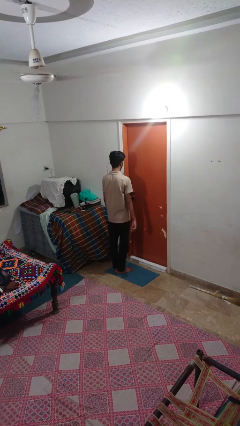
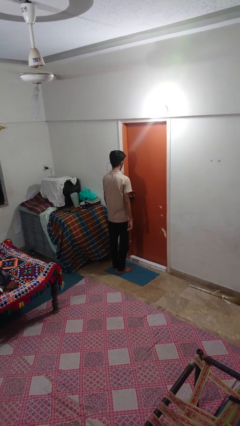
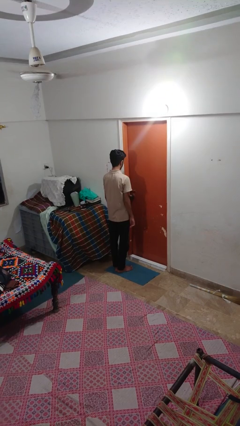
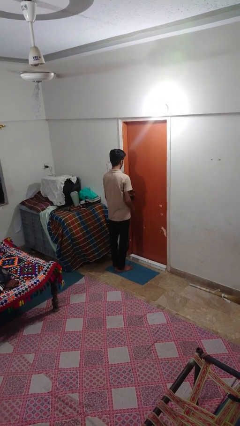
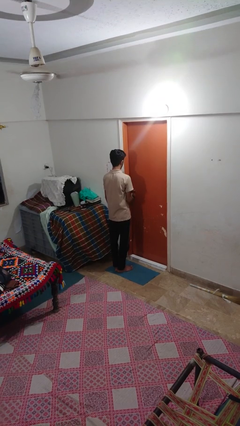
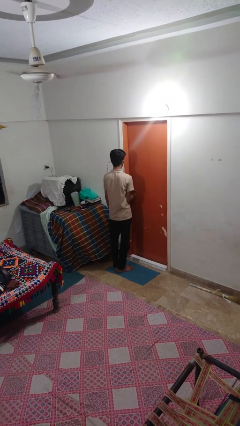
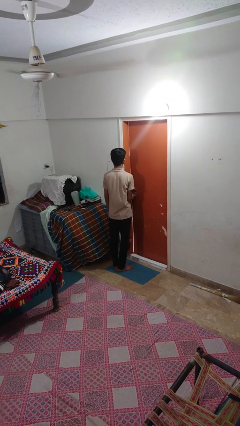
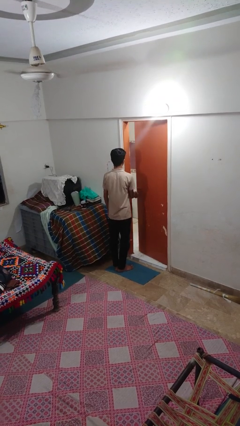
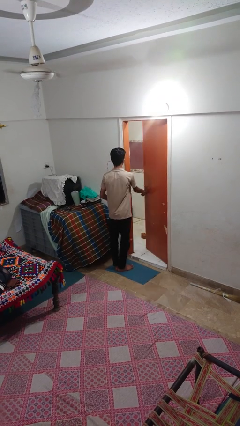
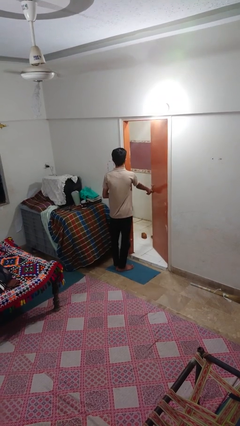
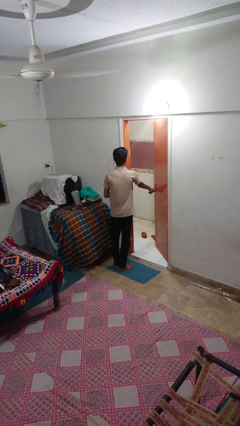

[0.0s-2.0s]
person opens facility door

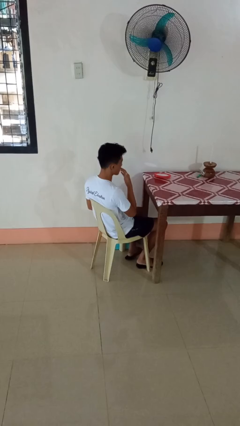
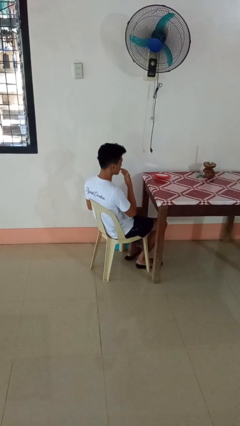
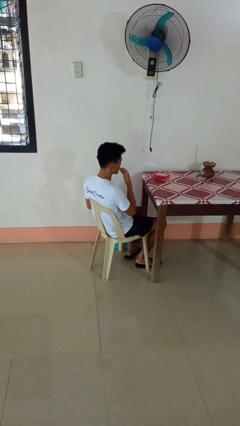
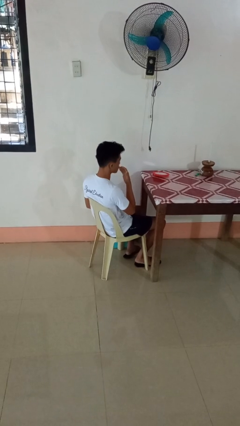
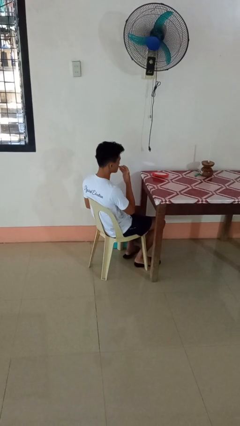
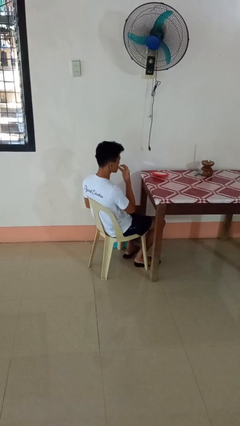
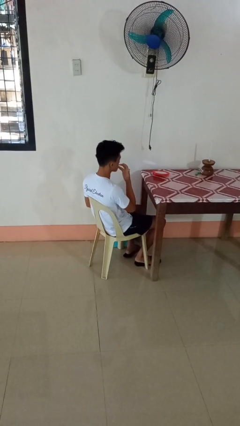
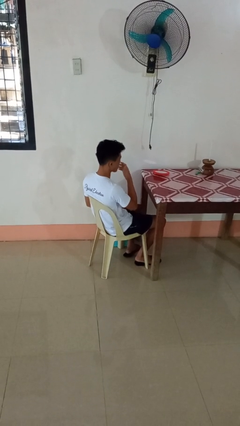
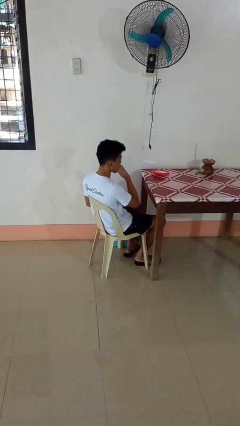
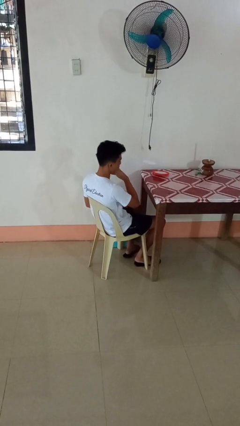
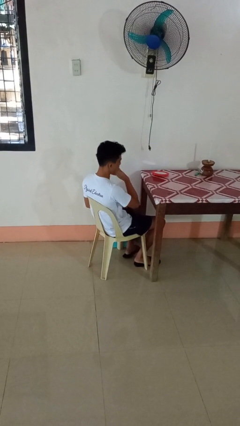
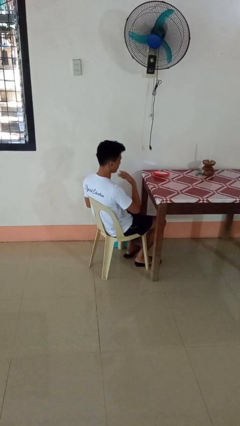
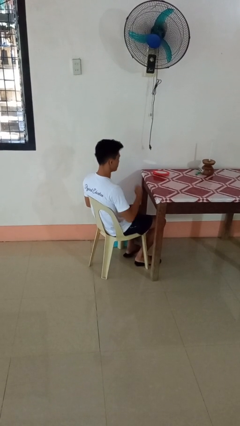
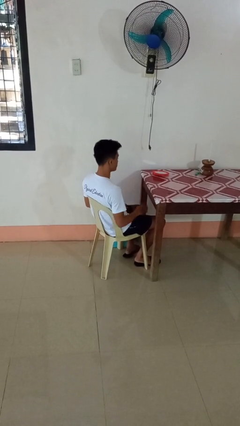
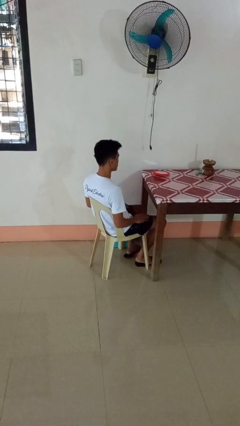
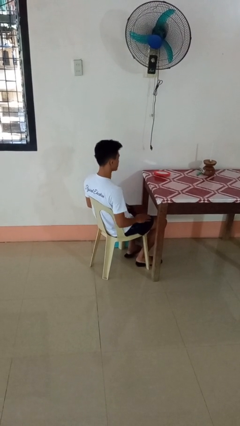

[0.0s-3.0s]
person licks fingers

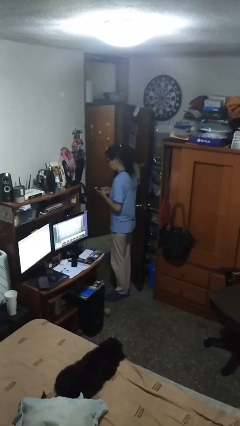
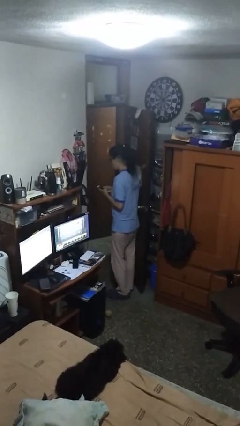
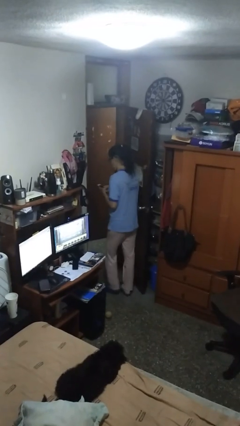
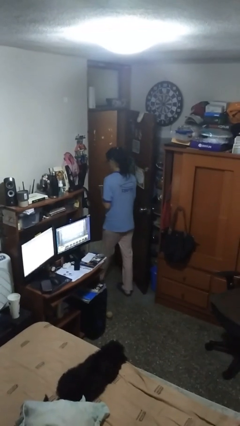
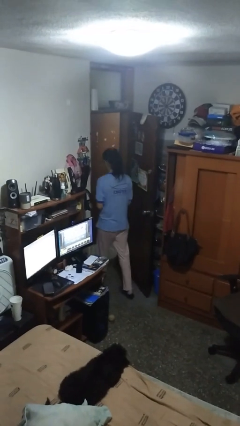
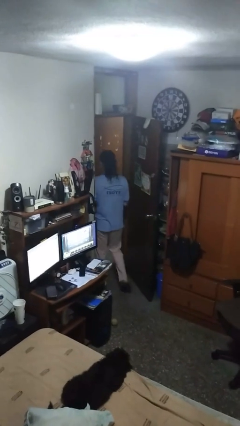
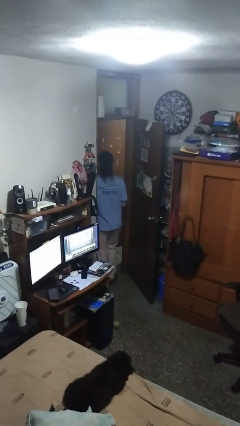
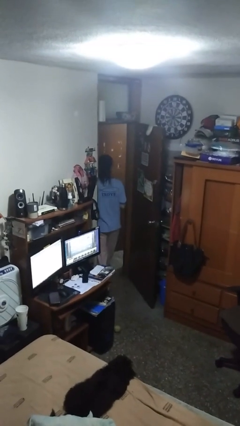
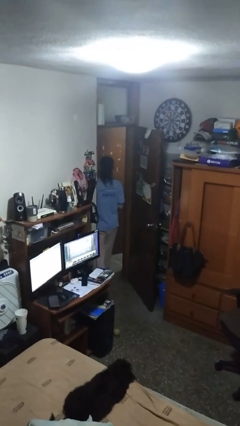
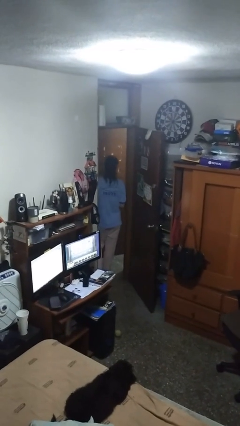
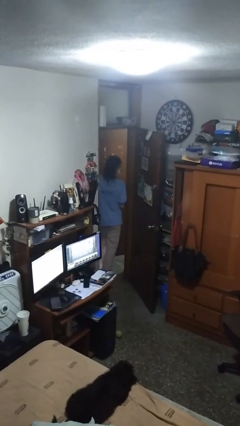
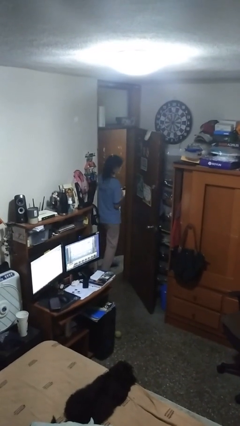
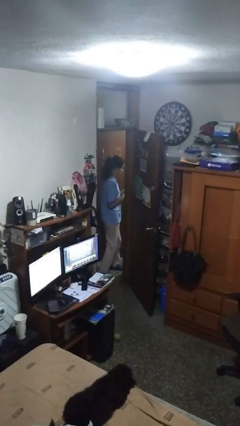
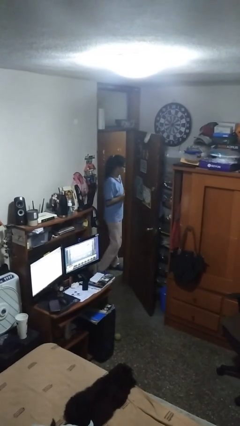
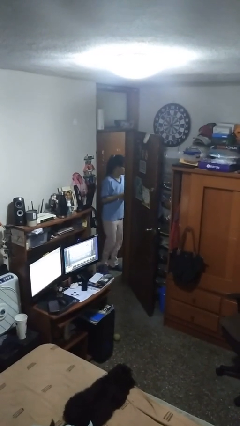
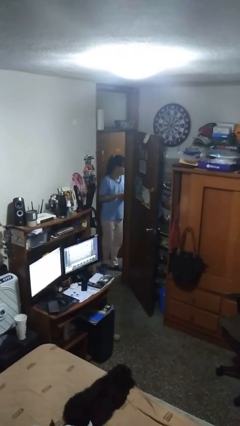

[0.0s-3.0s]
person exits scene through structure

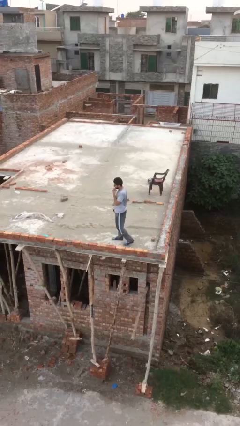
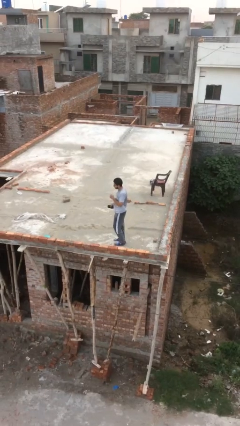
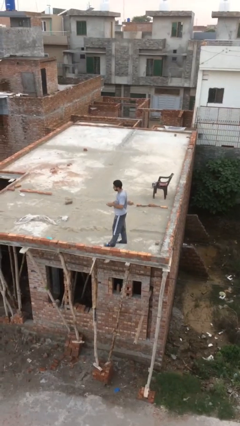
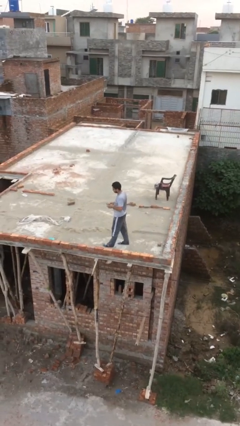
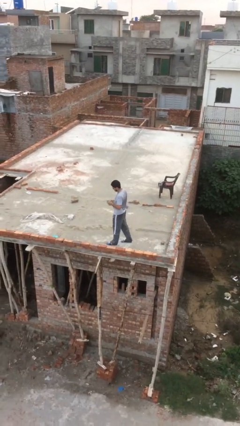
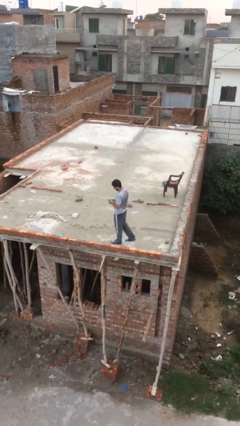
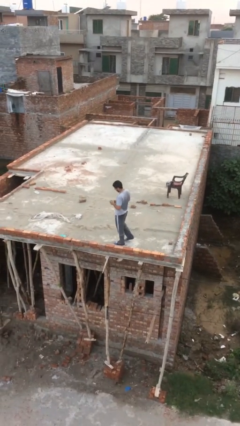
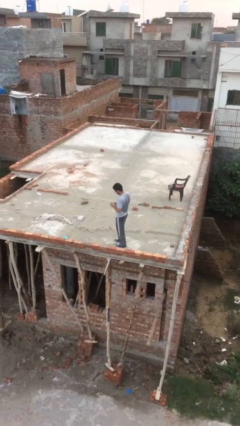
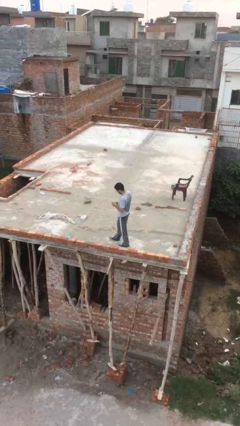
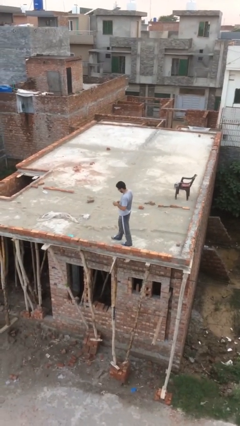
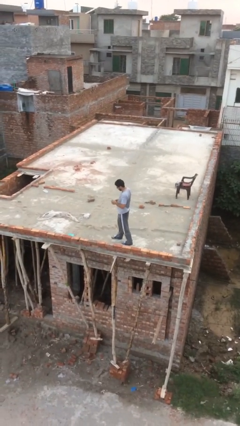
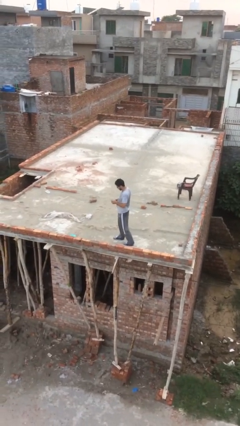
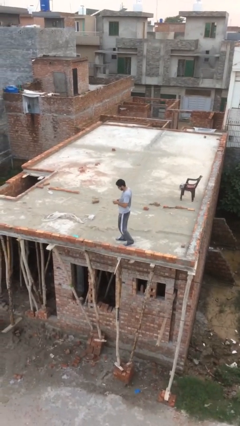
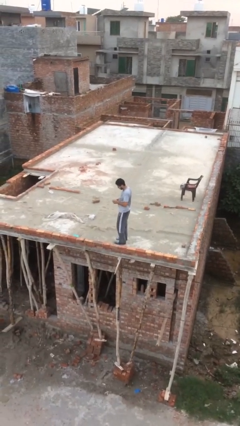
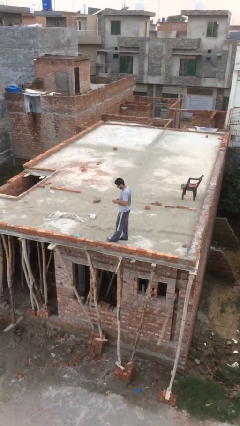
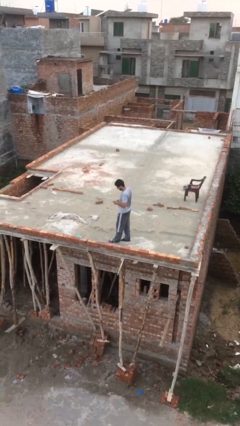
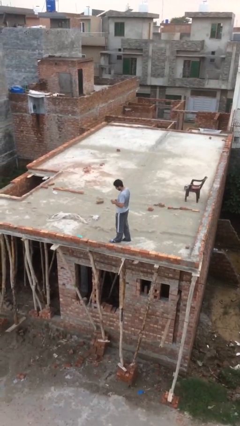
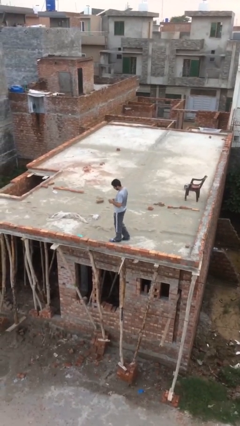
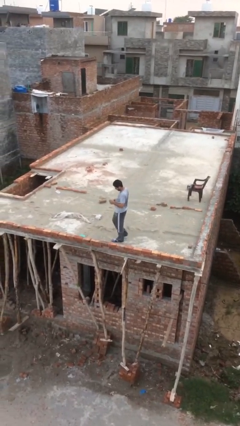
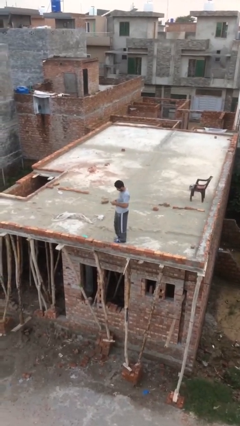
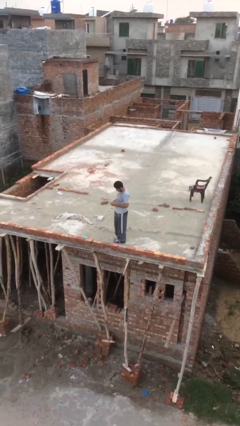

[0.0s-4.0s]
person texts on phone

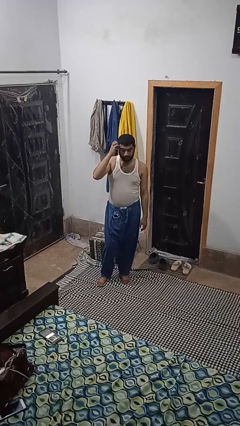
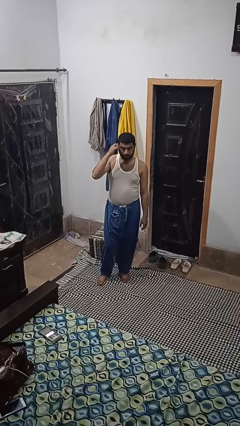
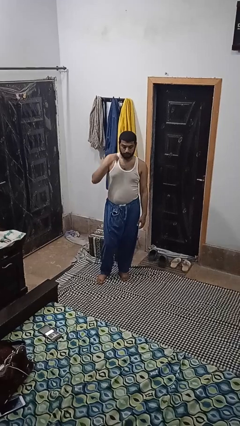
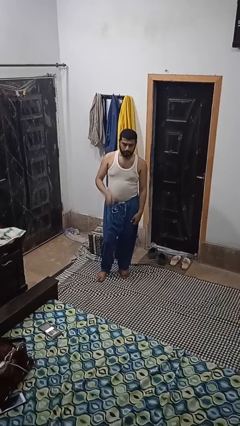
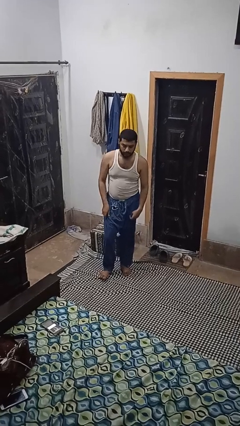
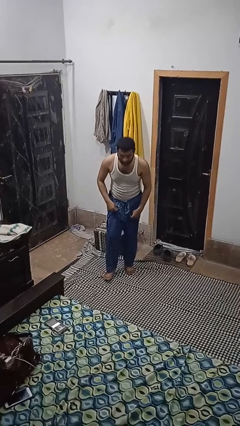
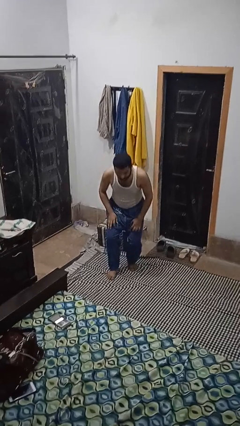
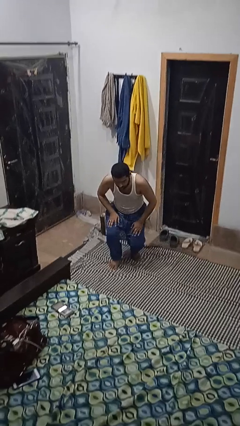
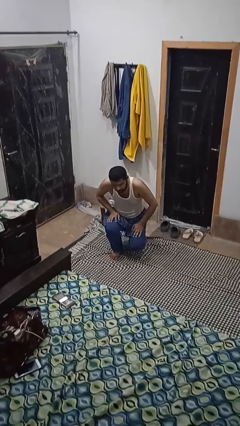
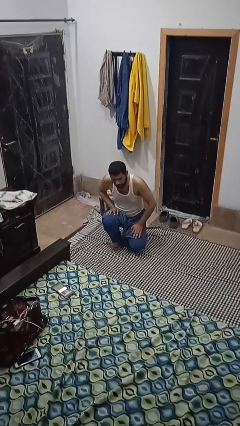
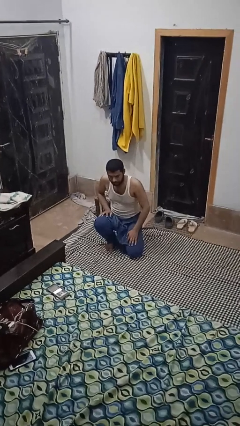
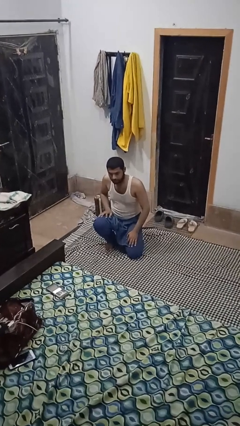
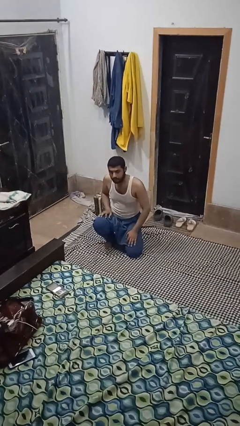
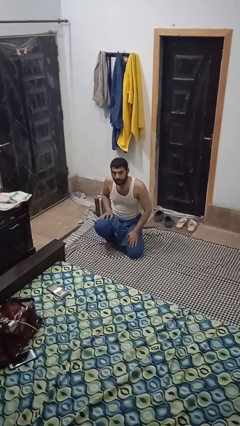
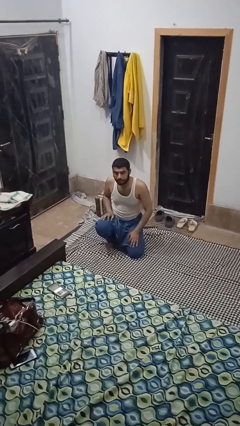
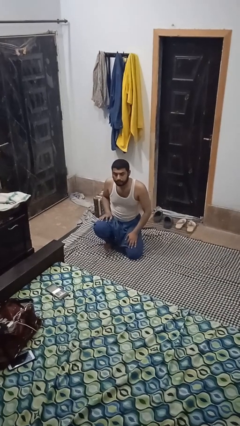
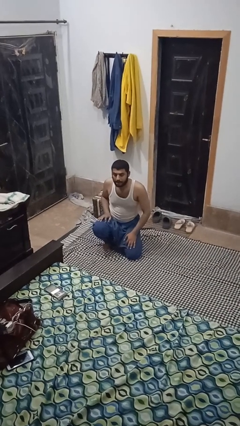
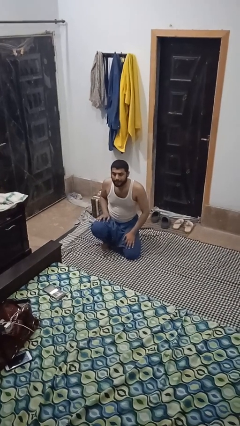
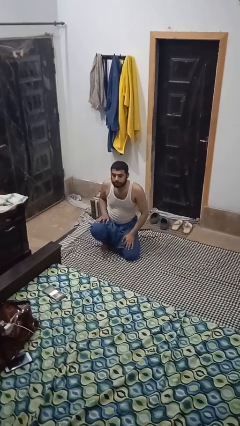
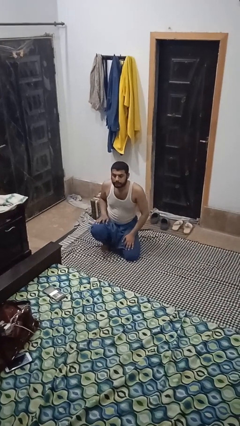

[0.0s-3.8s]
person kneels

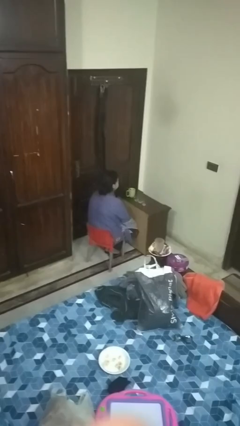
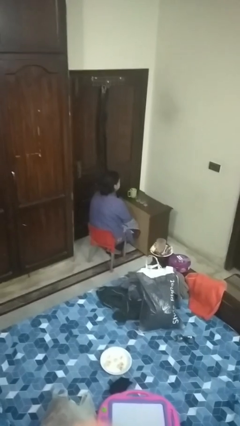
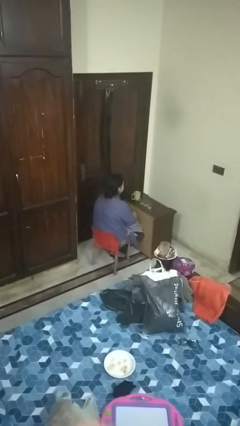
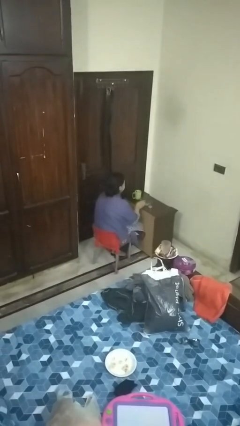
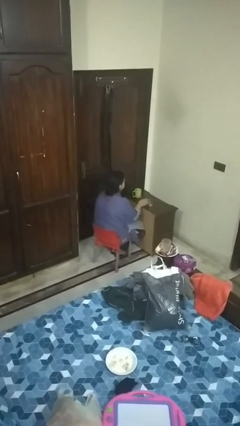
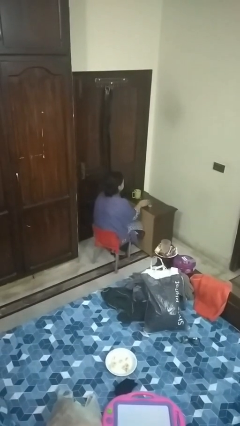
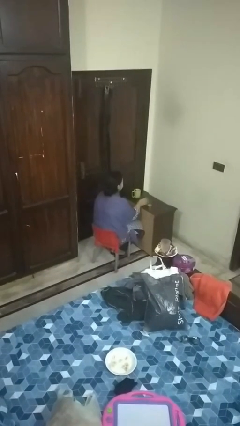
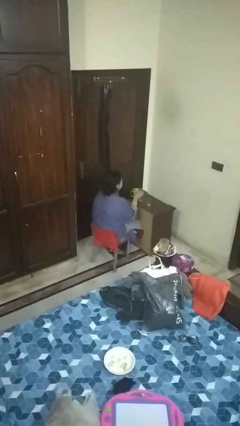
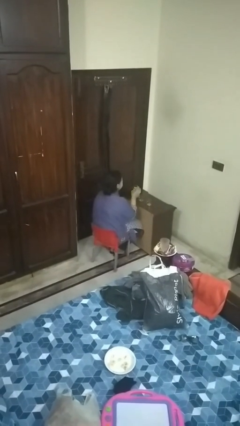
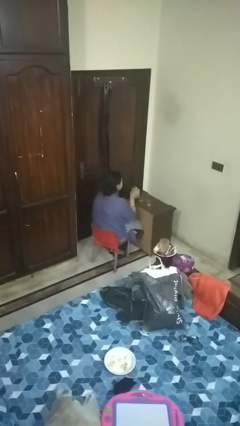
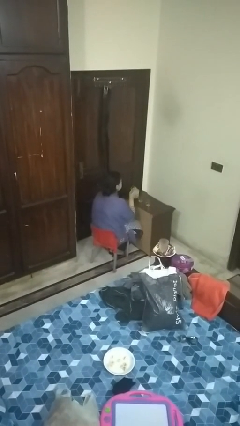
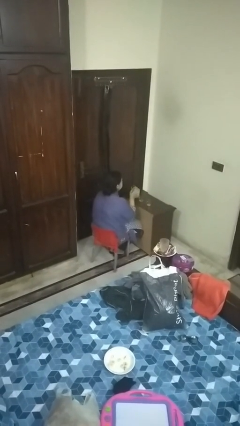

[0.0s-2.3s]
person picks up object from table
